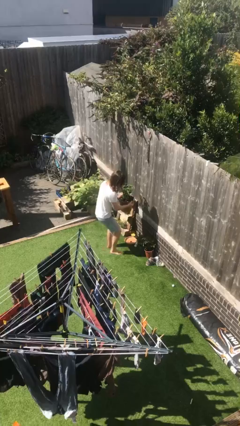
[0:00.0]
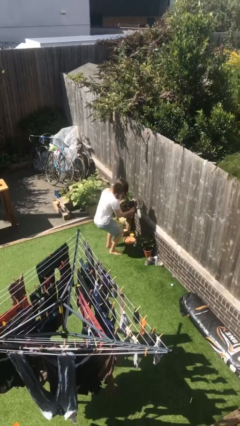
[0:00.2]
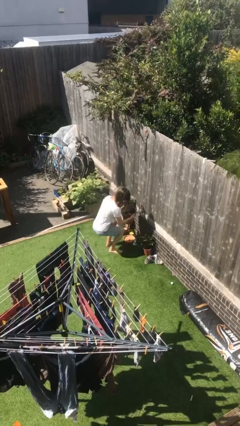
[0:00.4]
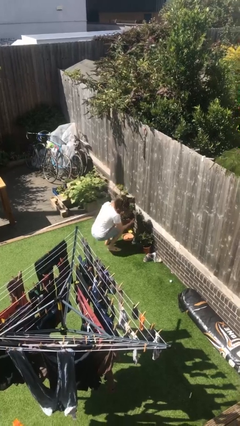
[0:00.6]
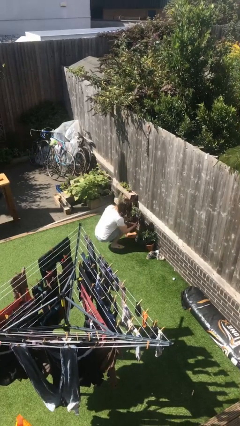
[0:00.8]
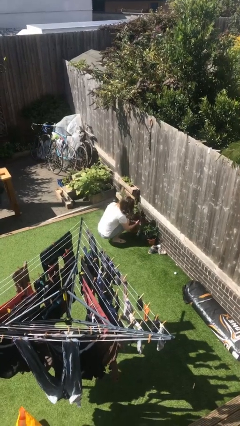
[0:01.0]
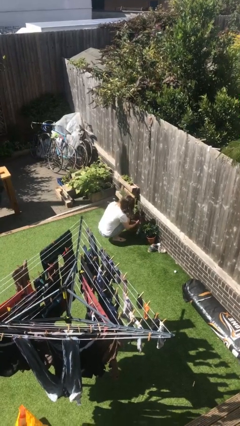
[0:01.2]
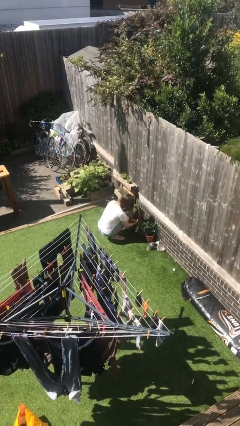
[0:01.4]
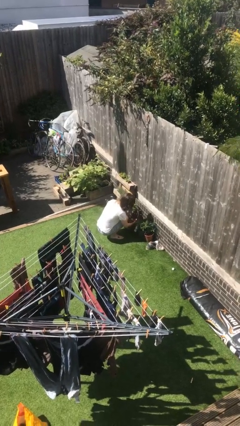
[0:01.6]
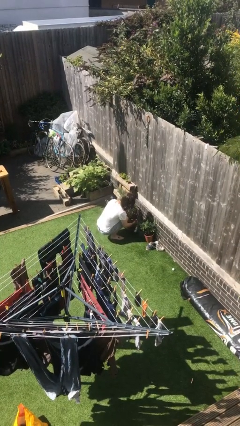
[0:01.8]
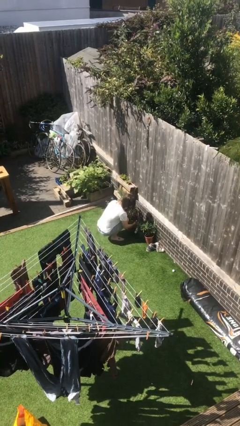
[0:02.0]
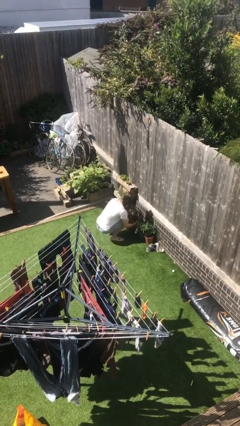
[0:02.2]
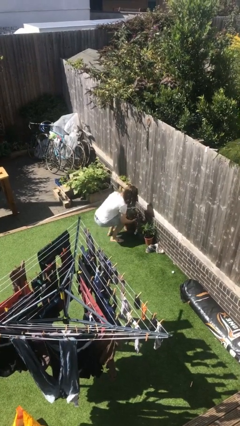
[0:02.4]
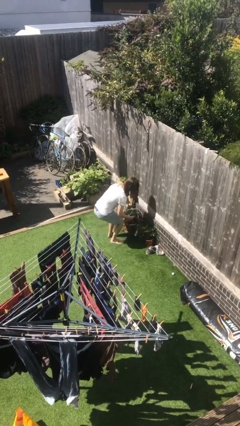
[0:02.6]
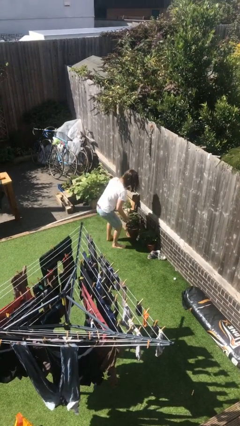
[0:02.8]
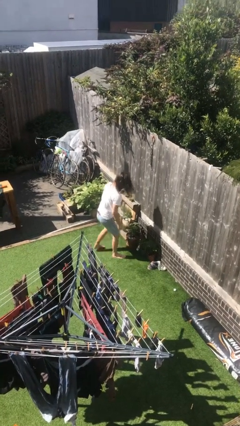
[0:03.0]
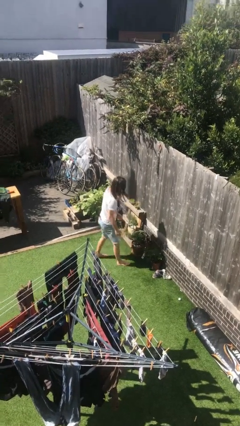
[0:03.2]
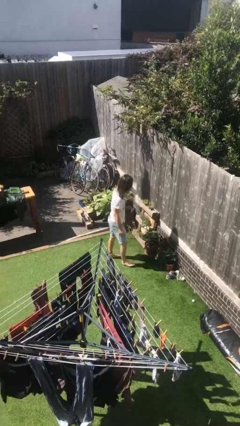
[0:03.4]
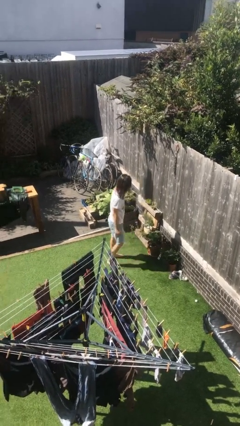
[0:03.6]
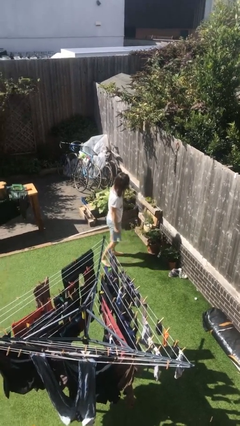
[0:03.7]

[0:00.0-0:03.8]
person puts down object on floor

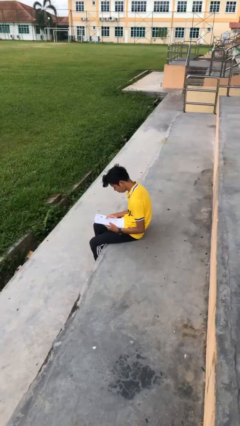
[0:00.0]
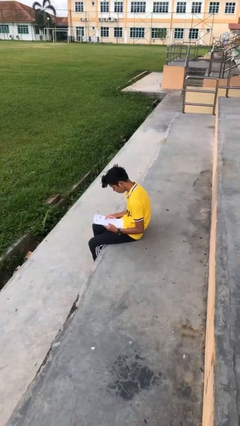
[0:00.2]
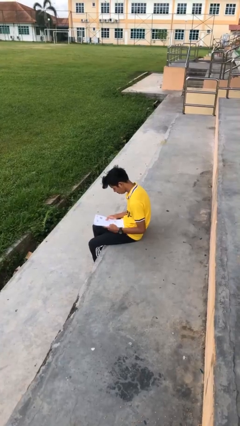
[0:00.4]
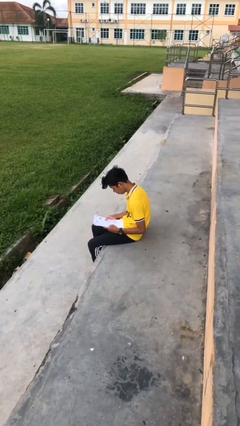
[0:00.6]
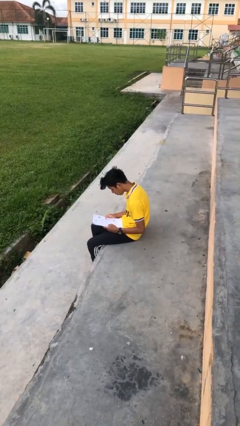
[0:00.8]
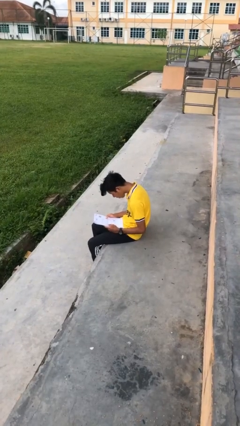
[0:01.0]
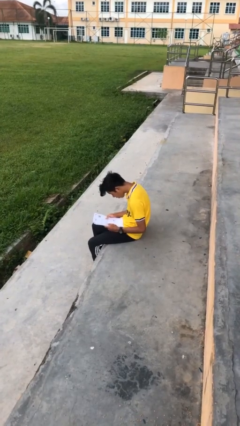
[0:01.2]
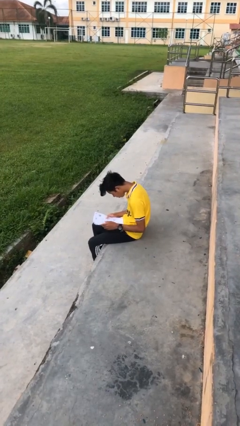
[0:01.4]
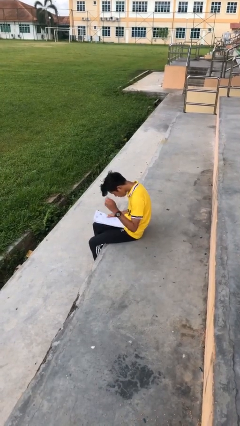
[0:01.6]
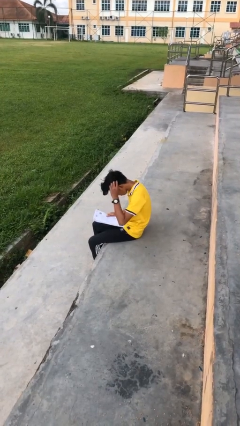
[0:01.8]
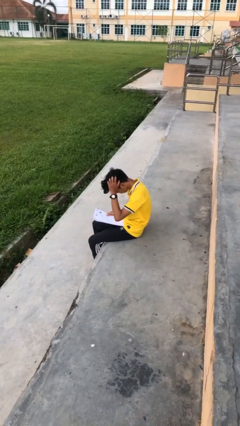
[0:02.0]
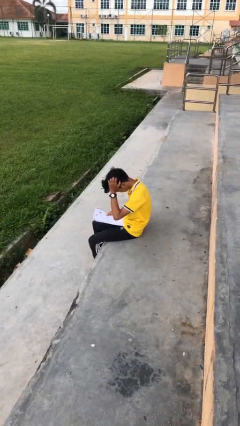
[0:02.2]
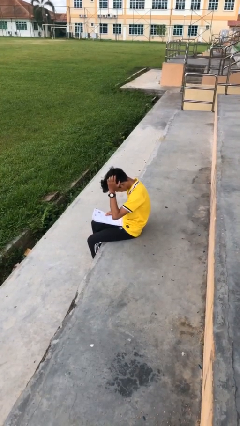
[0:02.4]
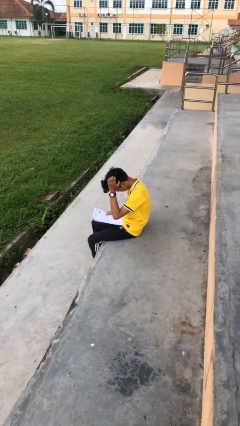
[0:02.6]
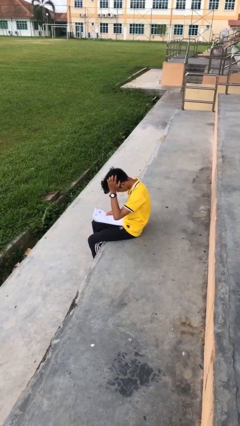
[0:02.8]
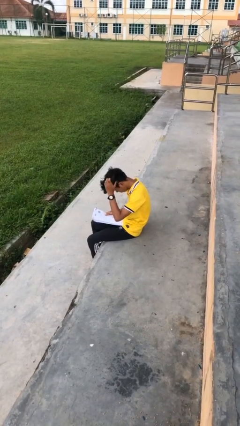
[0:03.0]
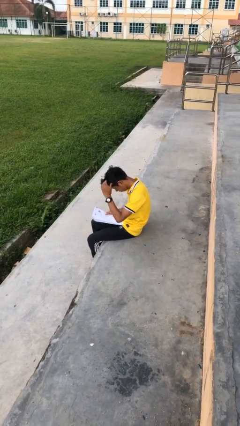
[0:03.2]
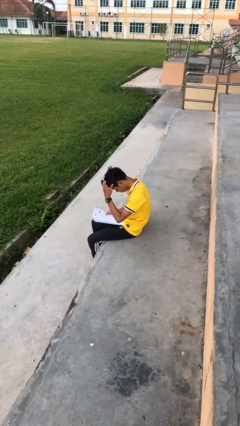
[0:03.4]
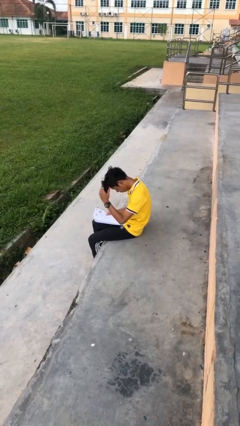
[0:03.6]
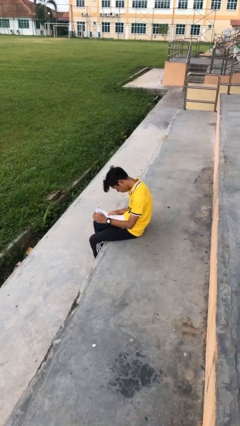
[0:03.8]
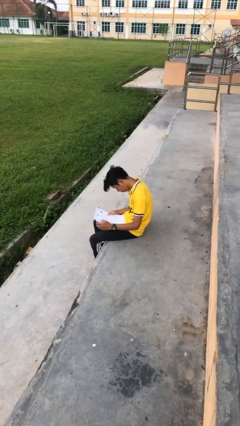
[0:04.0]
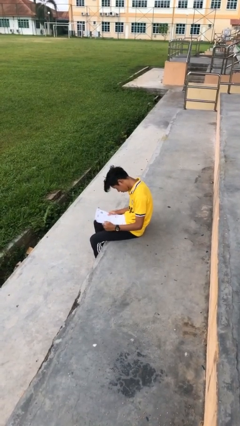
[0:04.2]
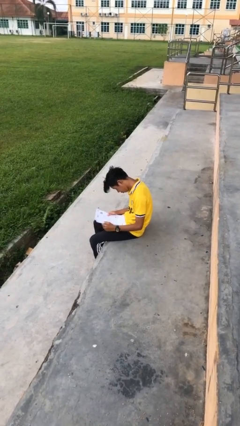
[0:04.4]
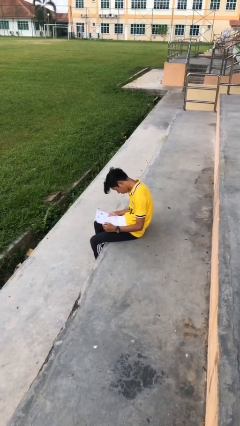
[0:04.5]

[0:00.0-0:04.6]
person reads document

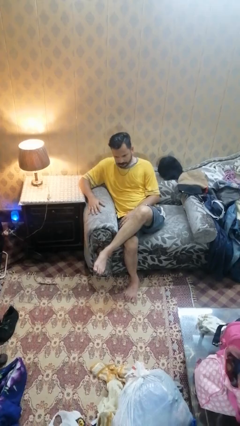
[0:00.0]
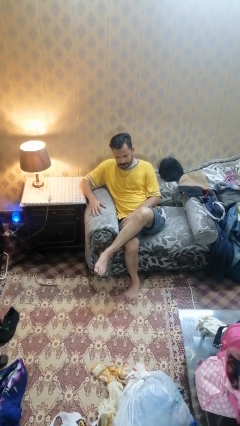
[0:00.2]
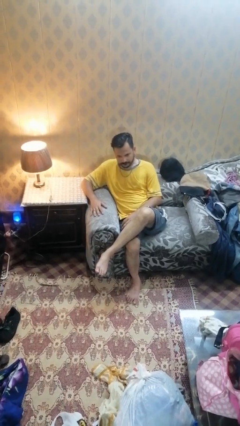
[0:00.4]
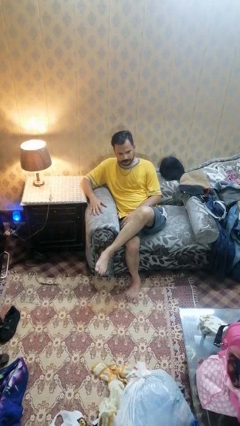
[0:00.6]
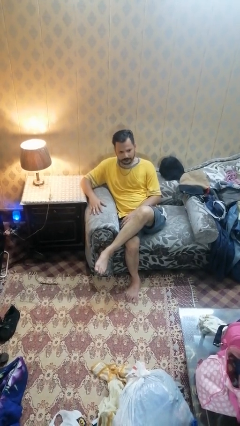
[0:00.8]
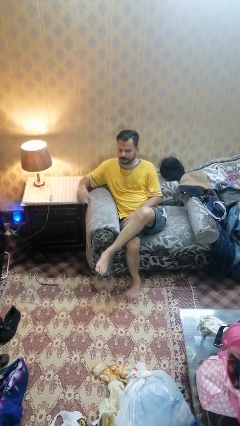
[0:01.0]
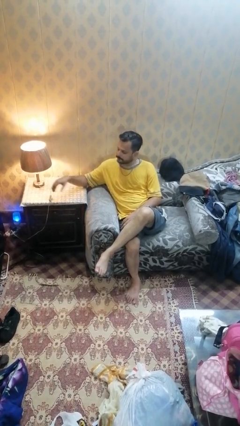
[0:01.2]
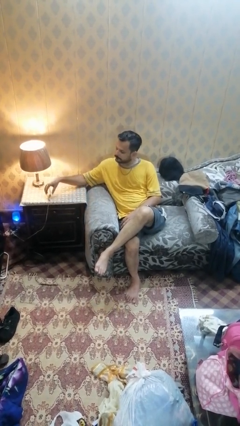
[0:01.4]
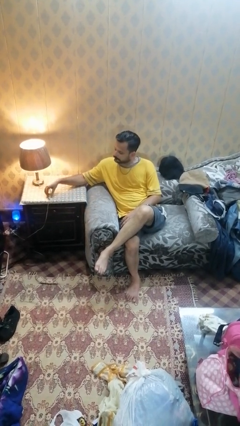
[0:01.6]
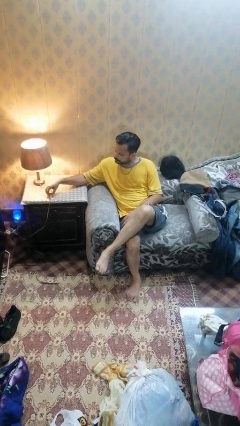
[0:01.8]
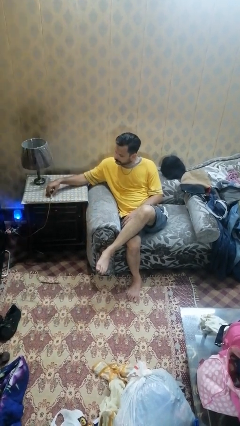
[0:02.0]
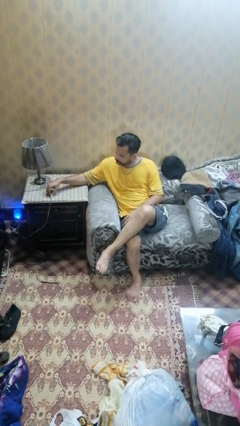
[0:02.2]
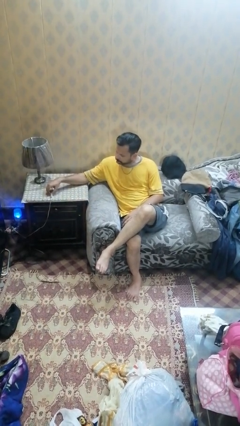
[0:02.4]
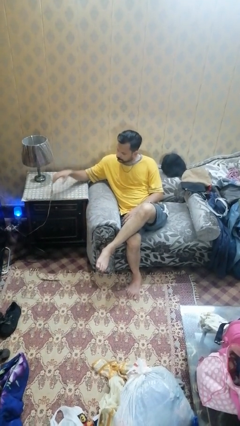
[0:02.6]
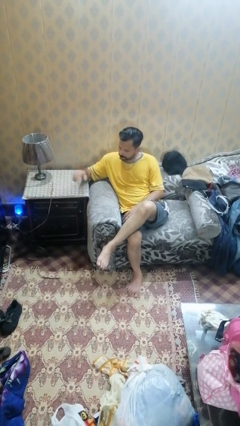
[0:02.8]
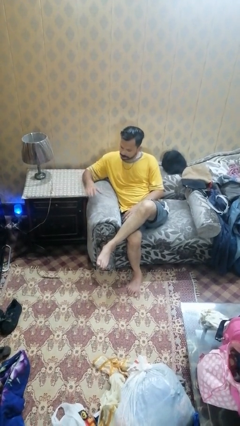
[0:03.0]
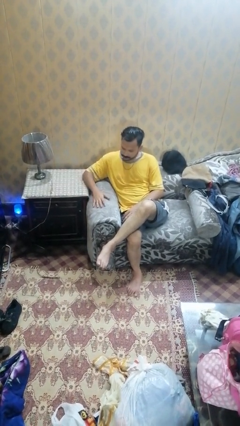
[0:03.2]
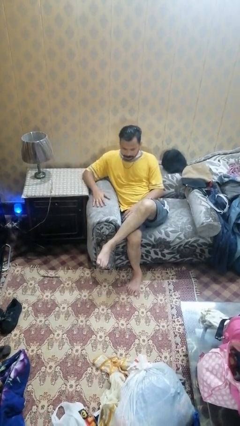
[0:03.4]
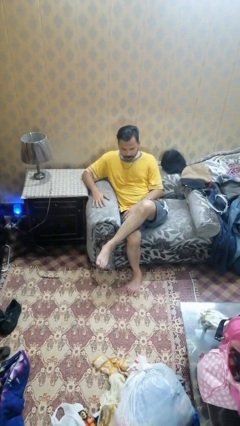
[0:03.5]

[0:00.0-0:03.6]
person turns off lamp

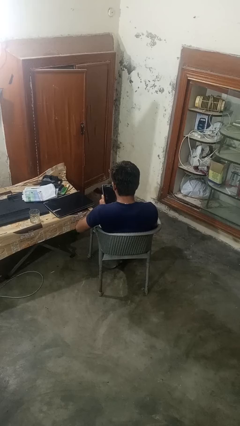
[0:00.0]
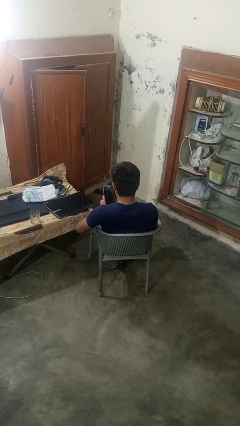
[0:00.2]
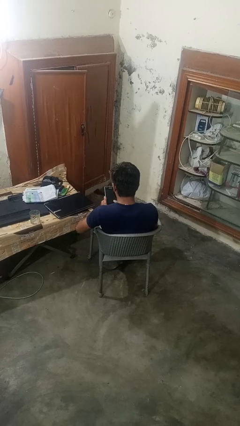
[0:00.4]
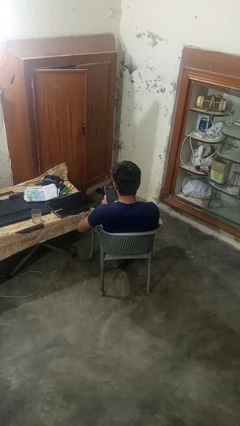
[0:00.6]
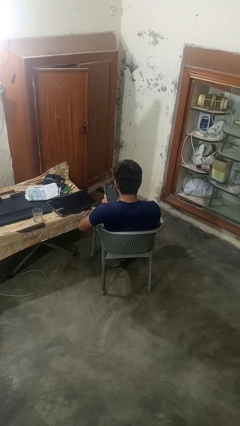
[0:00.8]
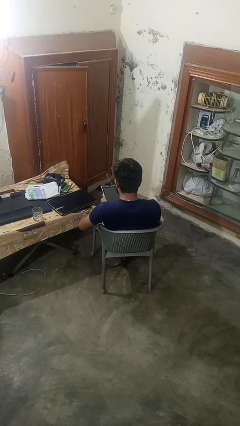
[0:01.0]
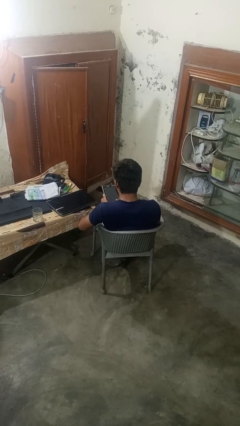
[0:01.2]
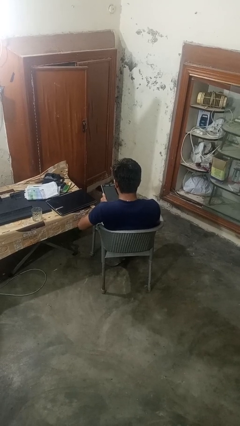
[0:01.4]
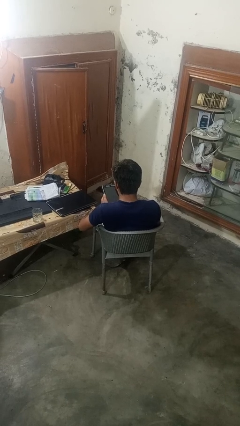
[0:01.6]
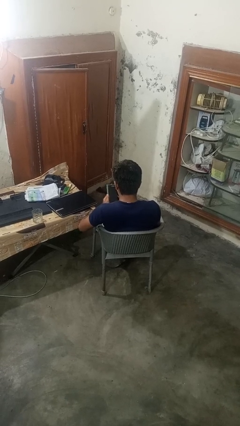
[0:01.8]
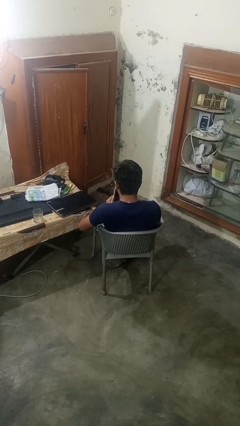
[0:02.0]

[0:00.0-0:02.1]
person interacts with tablet

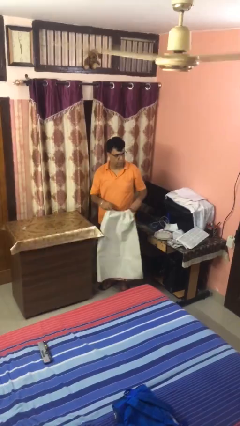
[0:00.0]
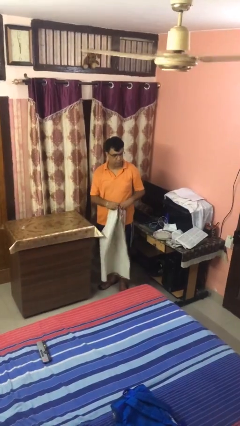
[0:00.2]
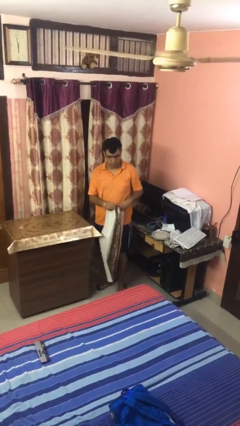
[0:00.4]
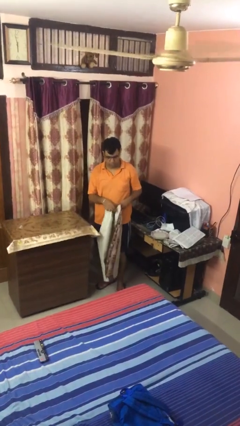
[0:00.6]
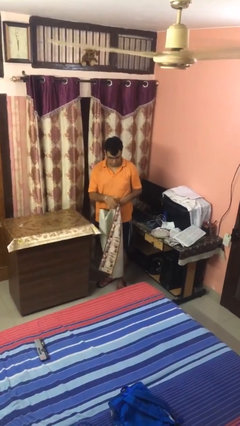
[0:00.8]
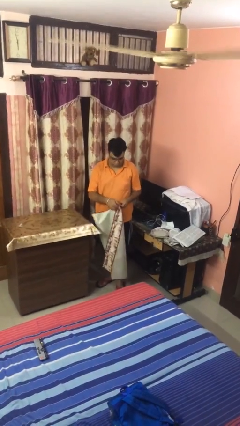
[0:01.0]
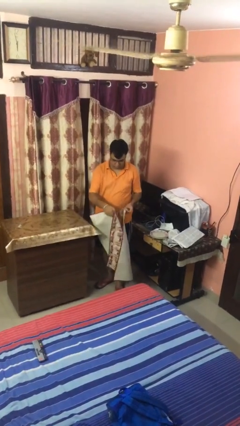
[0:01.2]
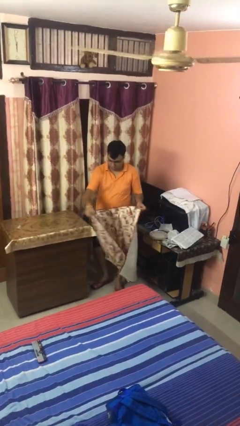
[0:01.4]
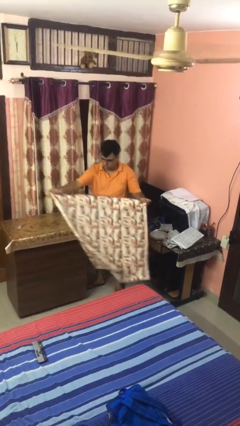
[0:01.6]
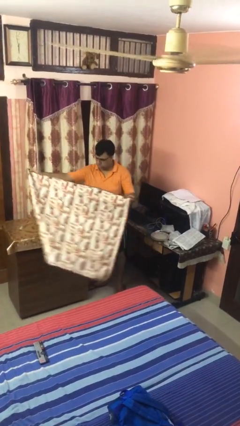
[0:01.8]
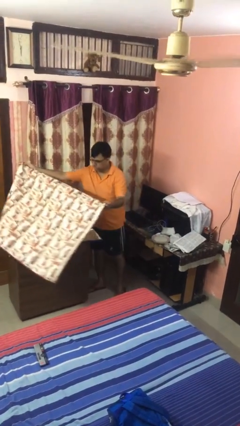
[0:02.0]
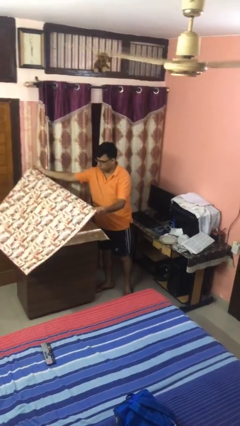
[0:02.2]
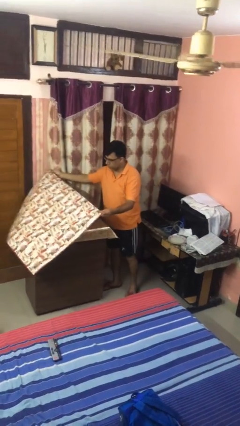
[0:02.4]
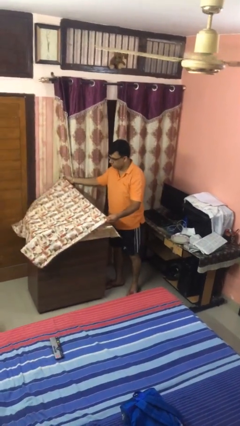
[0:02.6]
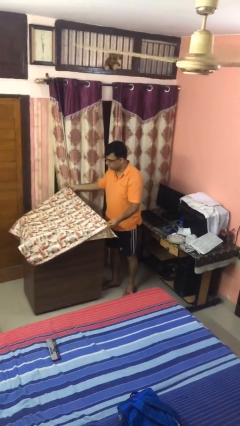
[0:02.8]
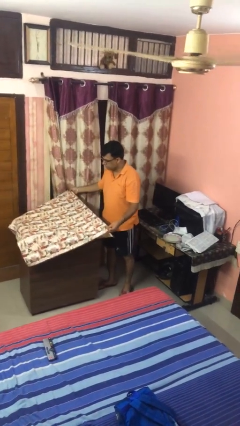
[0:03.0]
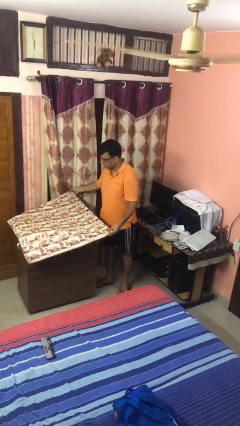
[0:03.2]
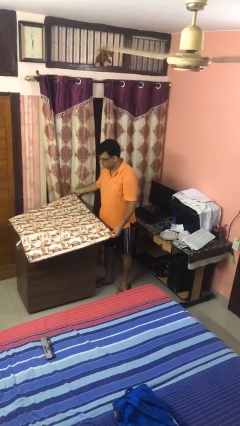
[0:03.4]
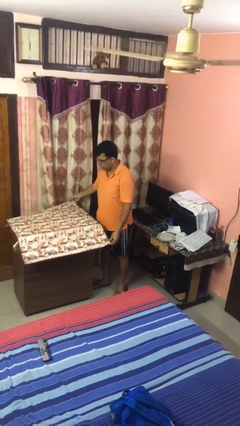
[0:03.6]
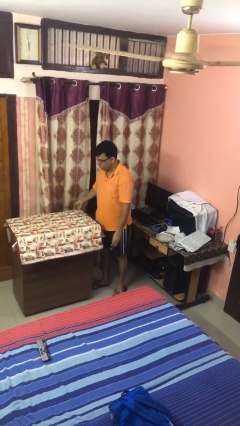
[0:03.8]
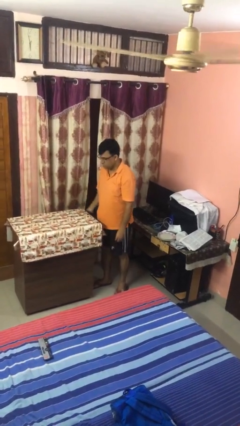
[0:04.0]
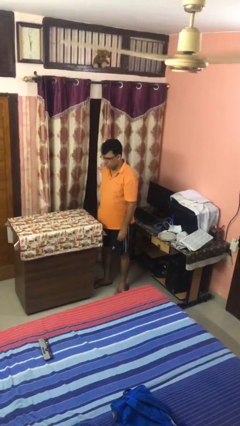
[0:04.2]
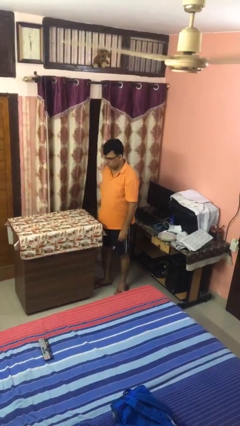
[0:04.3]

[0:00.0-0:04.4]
person spreads tablecloth
